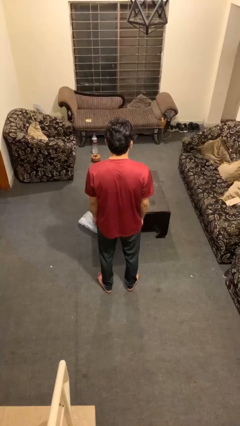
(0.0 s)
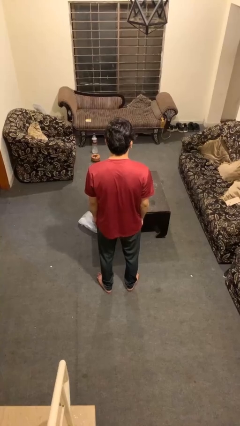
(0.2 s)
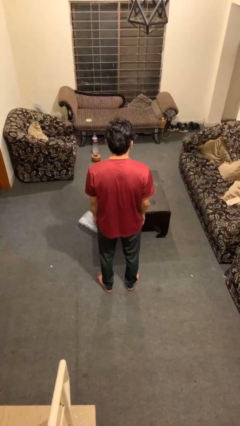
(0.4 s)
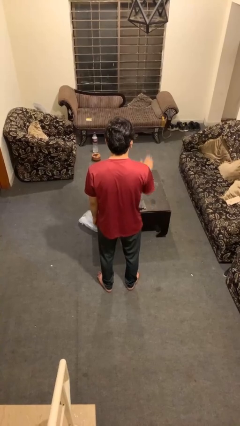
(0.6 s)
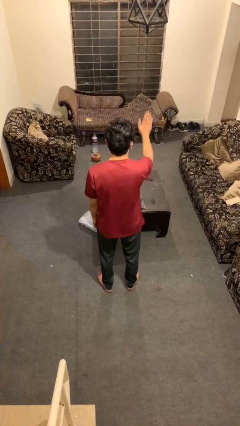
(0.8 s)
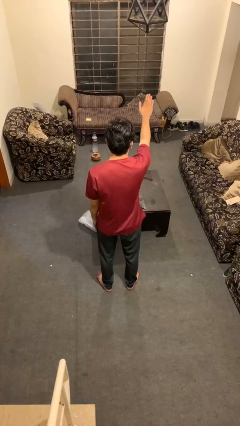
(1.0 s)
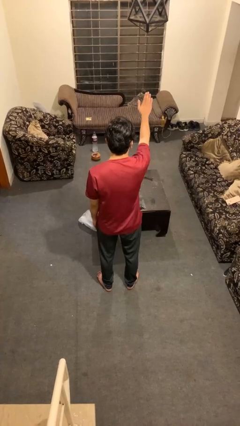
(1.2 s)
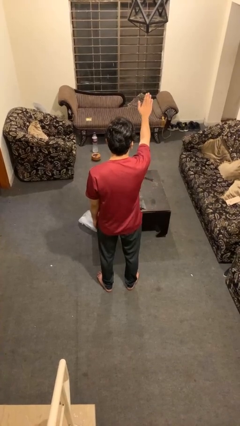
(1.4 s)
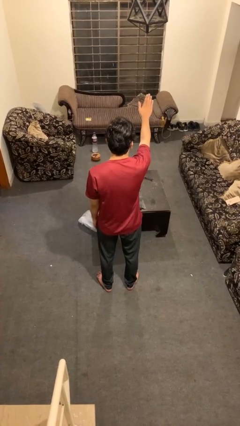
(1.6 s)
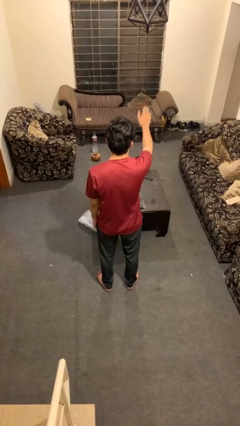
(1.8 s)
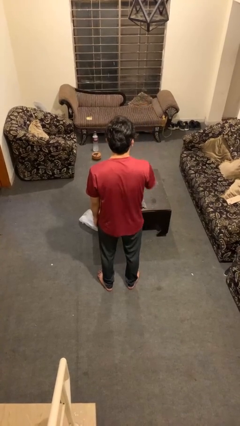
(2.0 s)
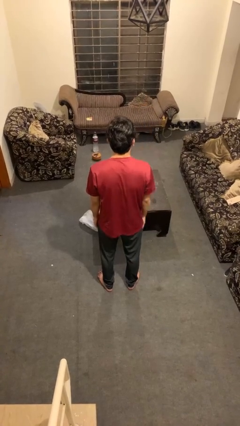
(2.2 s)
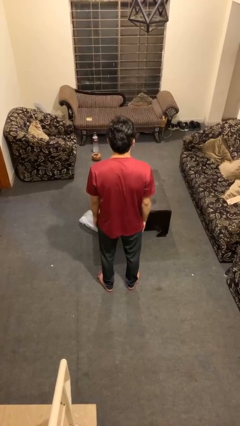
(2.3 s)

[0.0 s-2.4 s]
person gestures stop

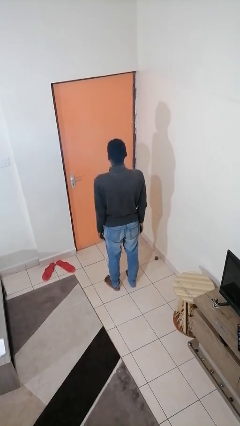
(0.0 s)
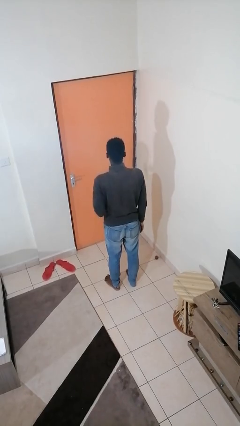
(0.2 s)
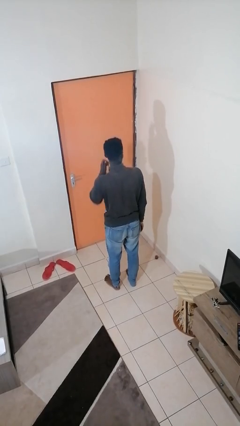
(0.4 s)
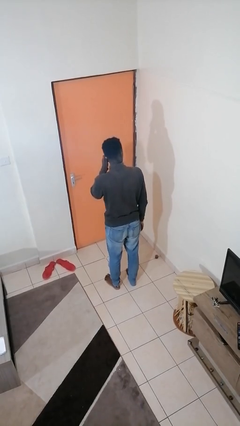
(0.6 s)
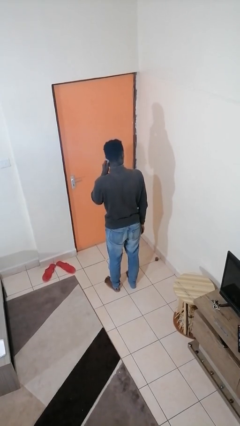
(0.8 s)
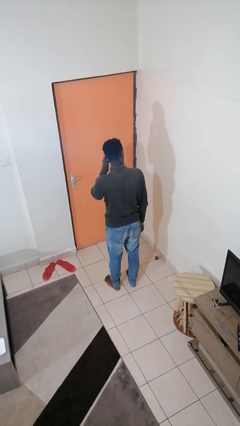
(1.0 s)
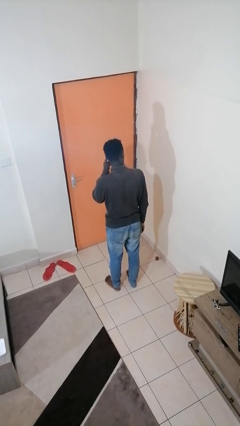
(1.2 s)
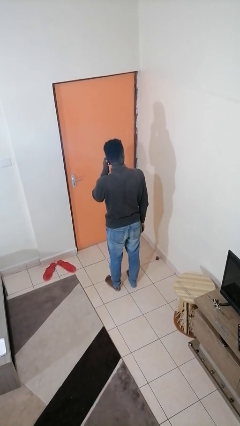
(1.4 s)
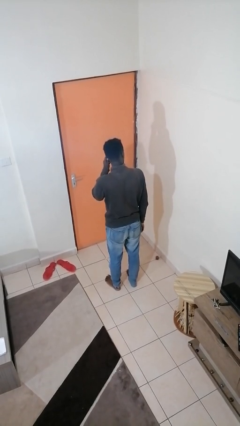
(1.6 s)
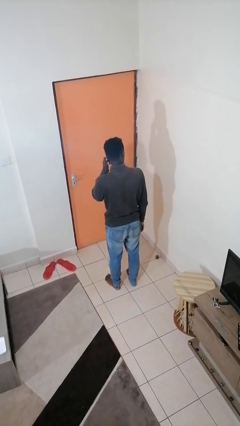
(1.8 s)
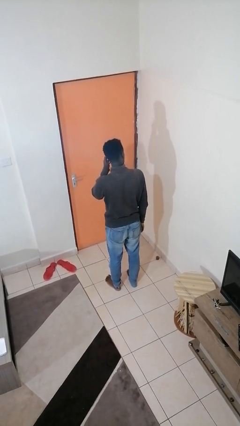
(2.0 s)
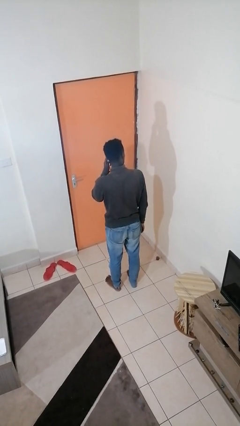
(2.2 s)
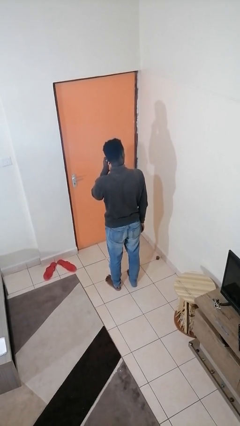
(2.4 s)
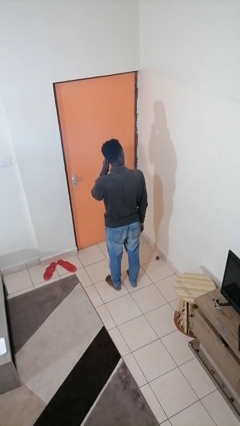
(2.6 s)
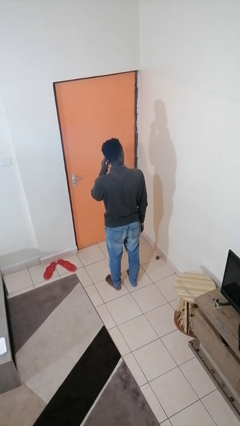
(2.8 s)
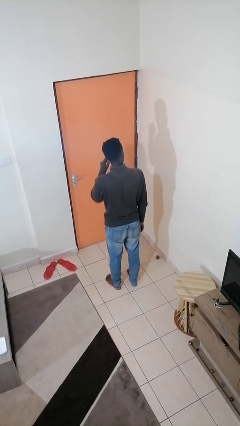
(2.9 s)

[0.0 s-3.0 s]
person touches earlobe

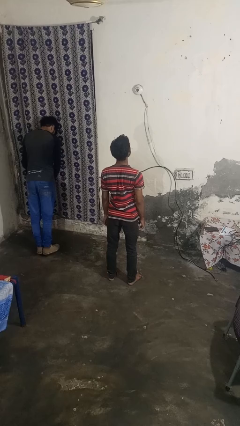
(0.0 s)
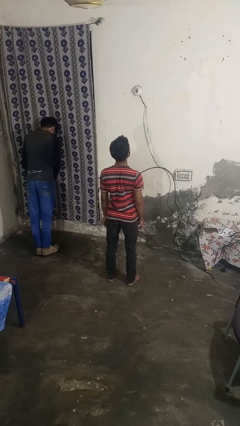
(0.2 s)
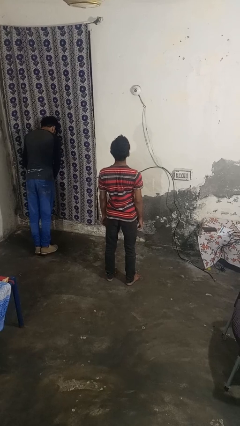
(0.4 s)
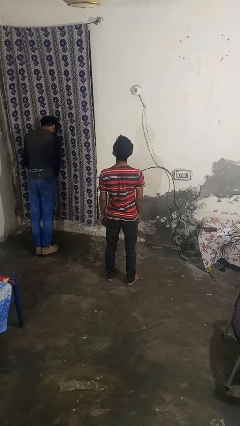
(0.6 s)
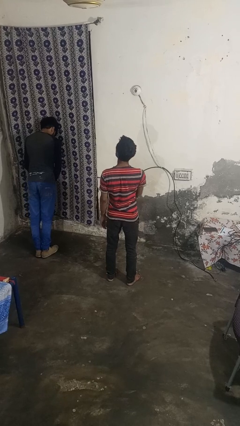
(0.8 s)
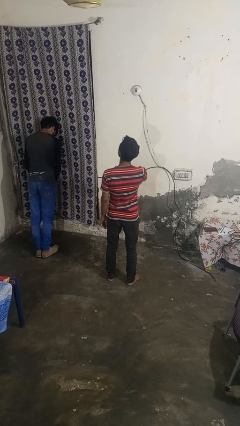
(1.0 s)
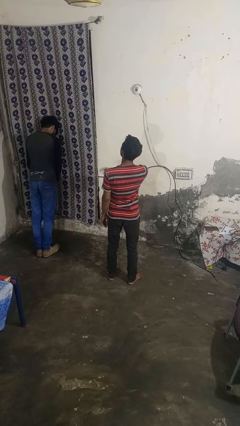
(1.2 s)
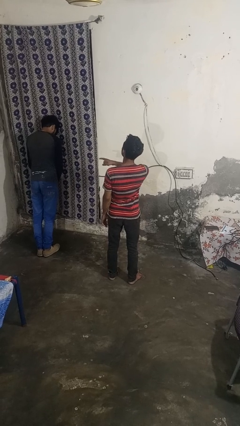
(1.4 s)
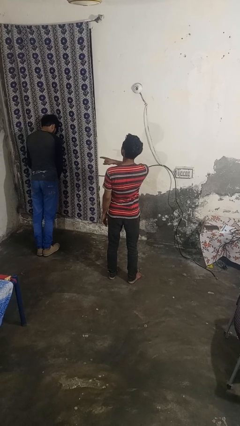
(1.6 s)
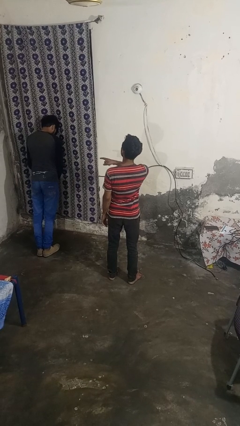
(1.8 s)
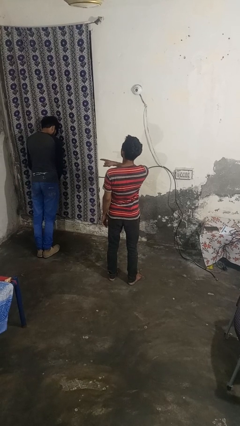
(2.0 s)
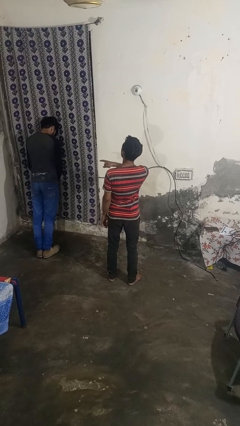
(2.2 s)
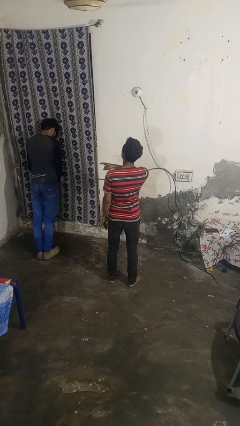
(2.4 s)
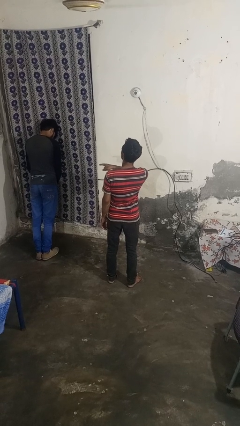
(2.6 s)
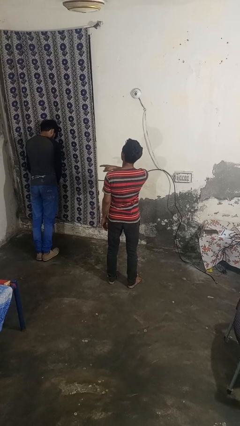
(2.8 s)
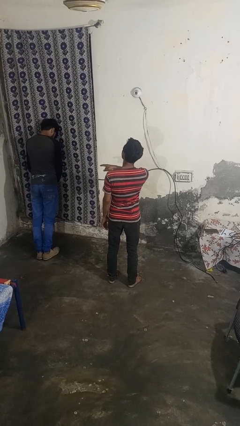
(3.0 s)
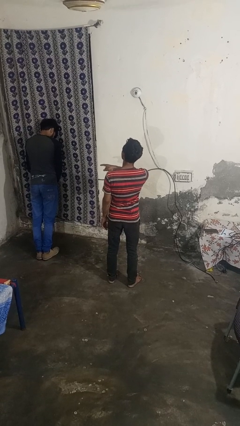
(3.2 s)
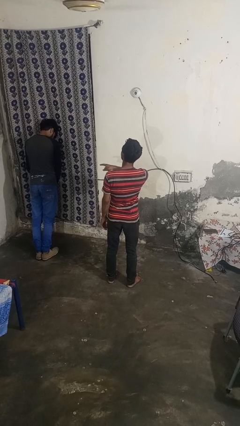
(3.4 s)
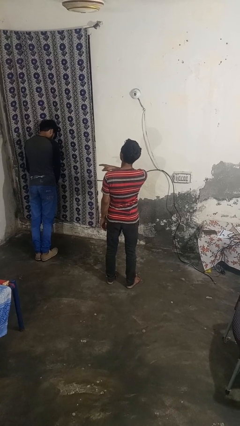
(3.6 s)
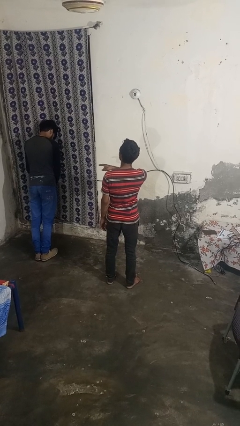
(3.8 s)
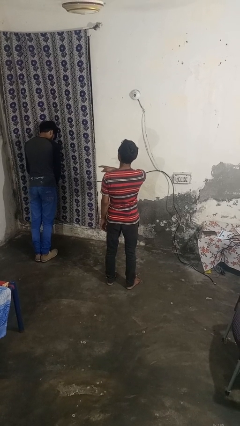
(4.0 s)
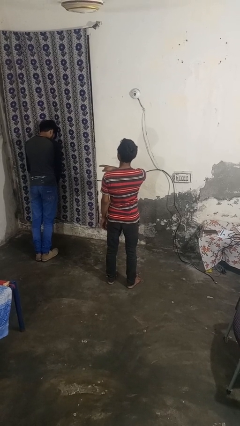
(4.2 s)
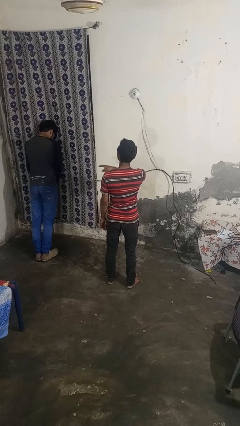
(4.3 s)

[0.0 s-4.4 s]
person points at person

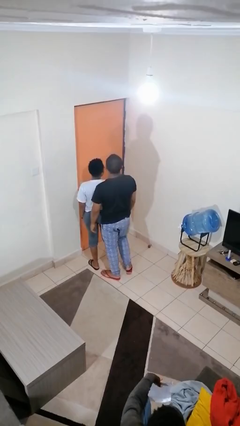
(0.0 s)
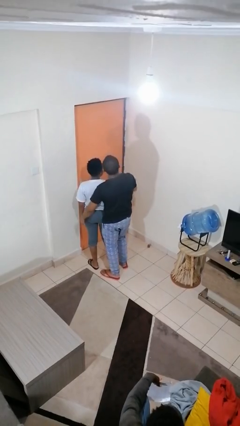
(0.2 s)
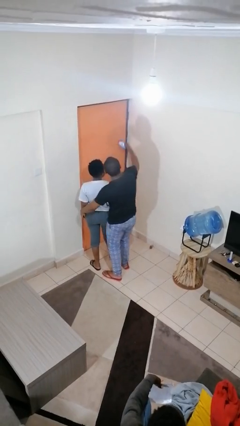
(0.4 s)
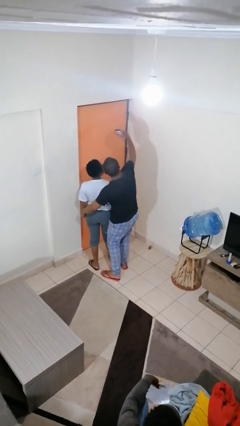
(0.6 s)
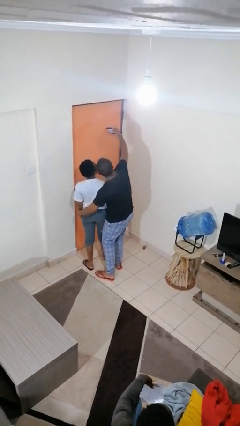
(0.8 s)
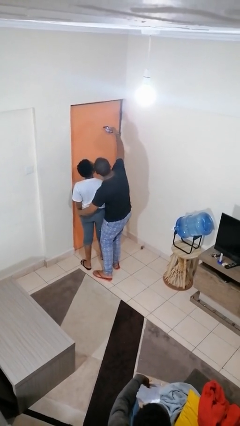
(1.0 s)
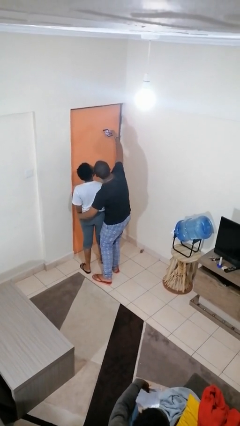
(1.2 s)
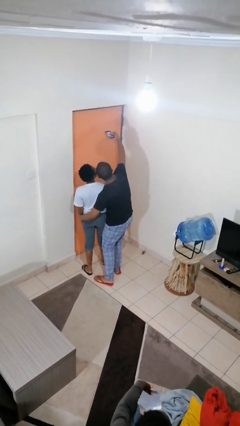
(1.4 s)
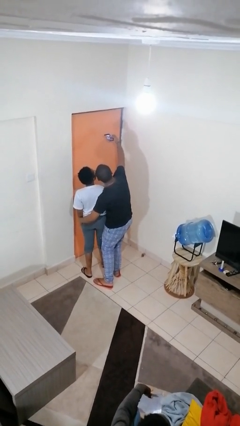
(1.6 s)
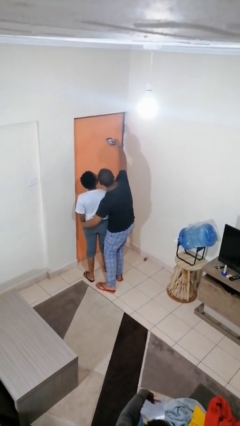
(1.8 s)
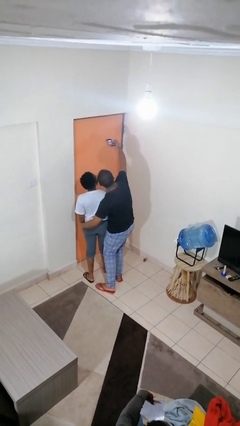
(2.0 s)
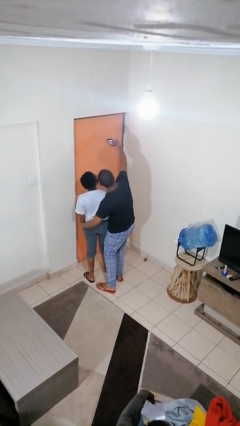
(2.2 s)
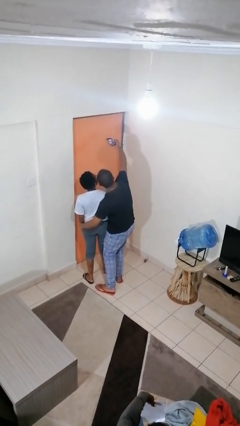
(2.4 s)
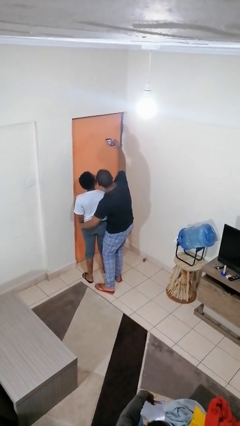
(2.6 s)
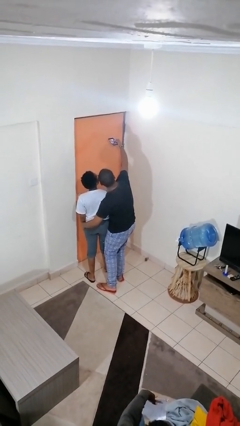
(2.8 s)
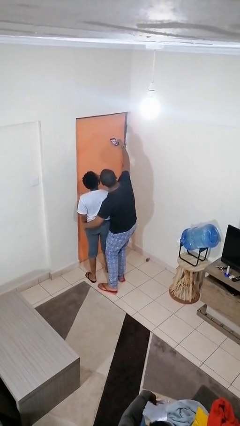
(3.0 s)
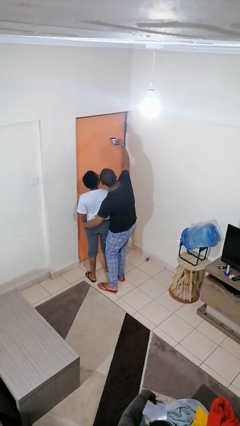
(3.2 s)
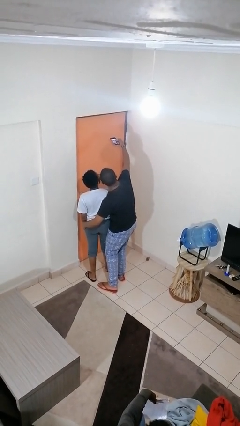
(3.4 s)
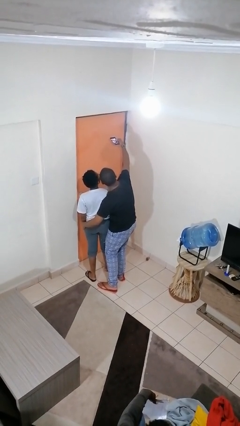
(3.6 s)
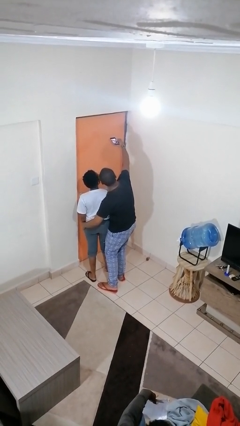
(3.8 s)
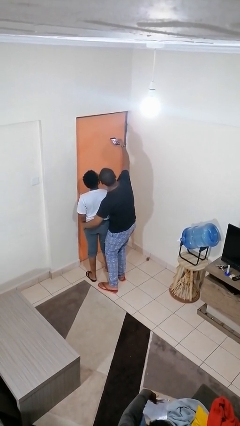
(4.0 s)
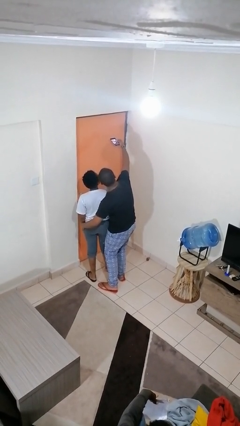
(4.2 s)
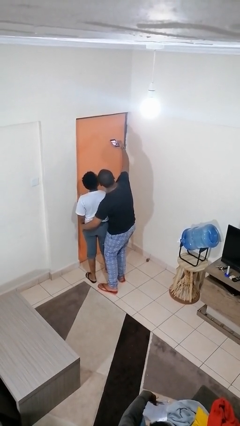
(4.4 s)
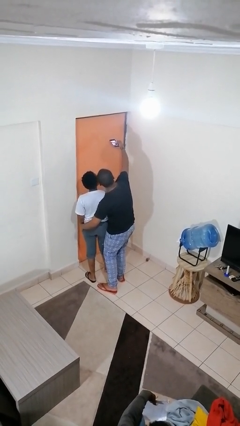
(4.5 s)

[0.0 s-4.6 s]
person takes selfie with person

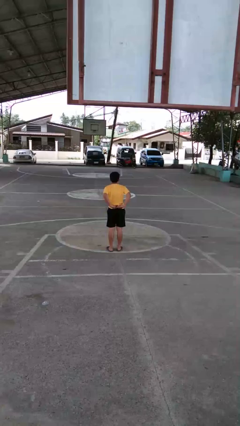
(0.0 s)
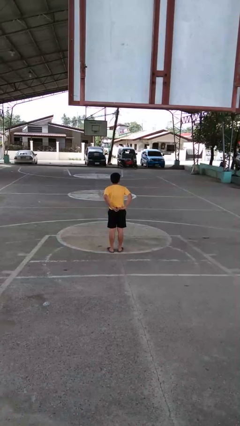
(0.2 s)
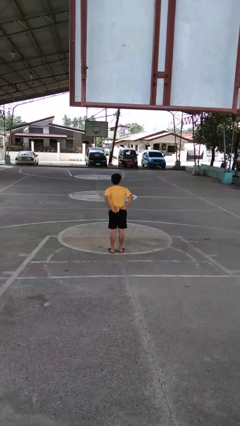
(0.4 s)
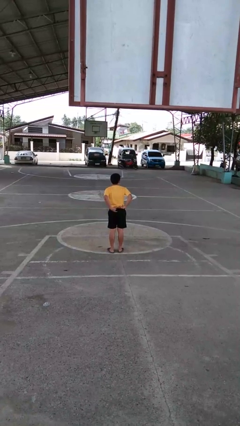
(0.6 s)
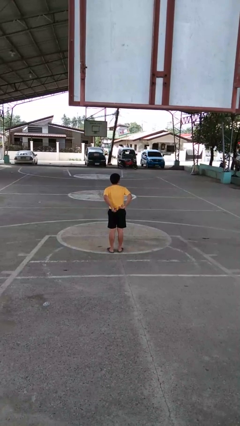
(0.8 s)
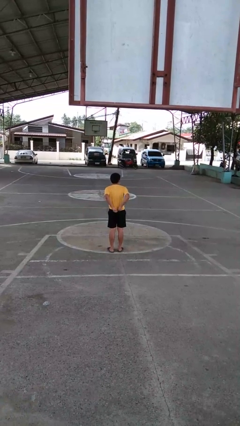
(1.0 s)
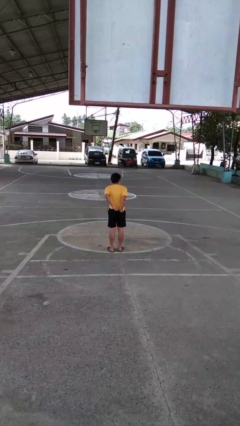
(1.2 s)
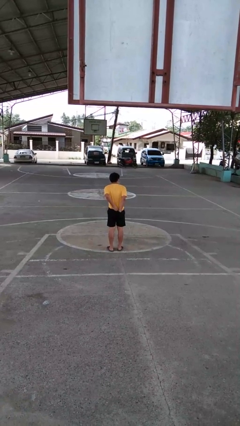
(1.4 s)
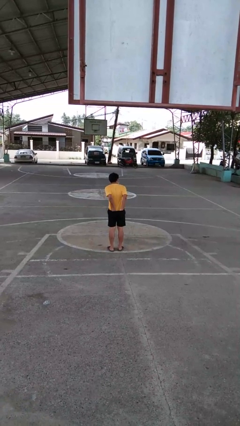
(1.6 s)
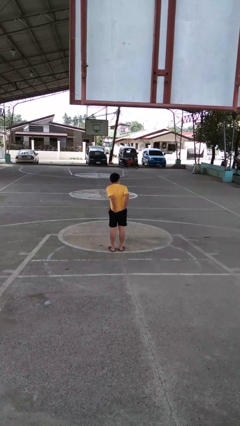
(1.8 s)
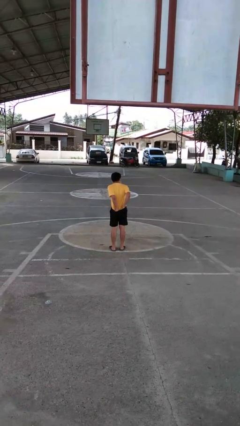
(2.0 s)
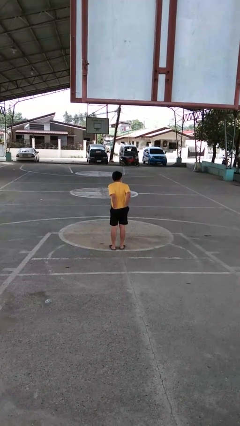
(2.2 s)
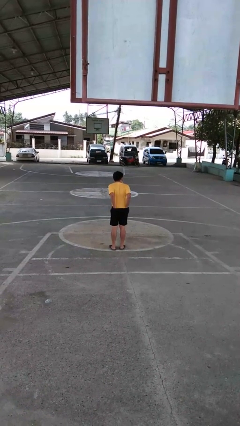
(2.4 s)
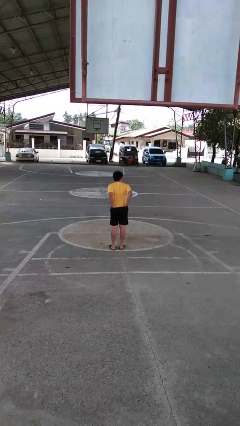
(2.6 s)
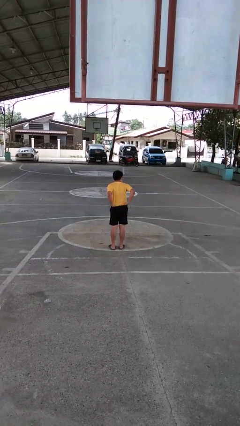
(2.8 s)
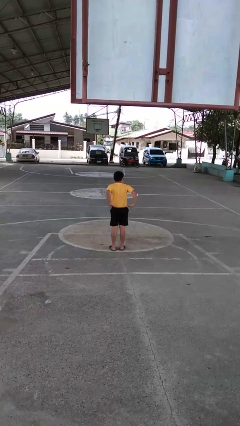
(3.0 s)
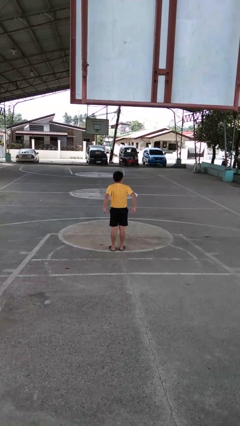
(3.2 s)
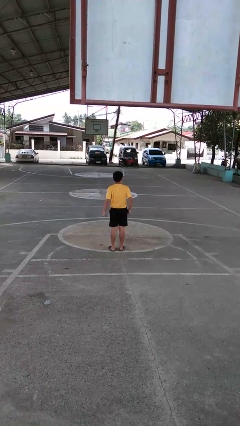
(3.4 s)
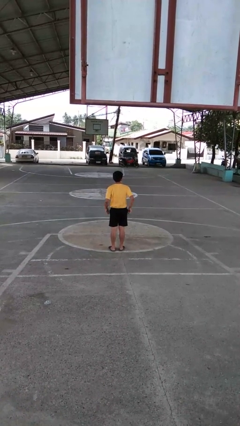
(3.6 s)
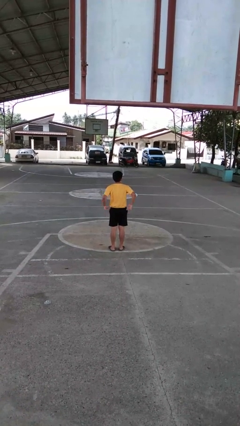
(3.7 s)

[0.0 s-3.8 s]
person tucks in shirt
